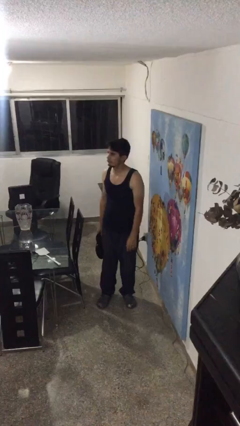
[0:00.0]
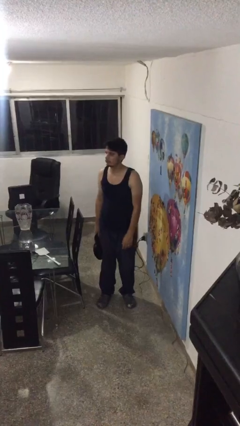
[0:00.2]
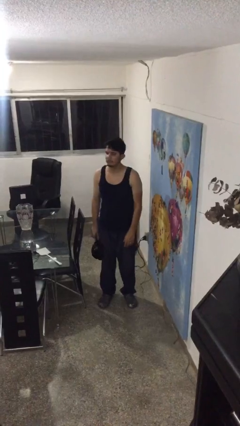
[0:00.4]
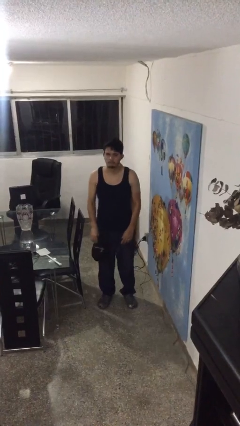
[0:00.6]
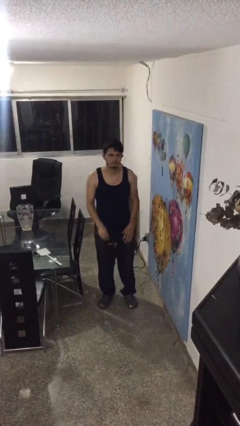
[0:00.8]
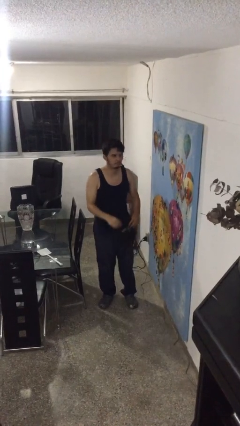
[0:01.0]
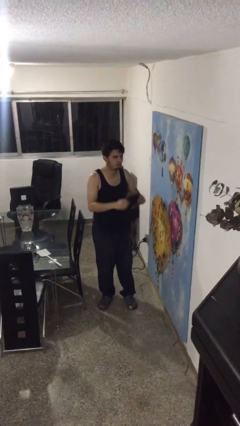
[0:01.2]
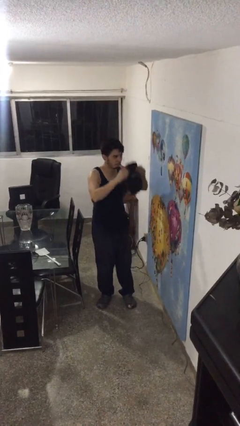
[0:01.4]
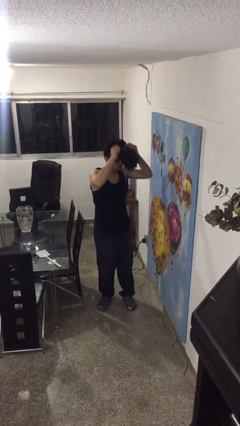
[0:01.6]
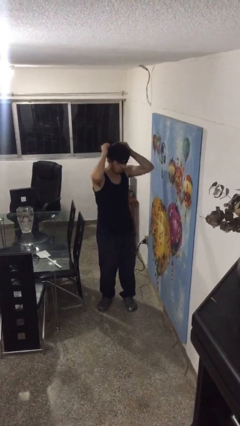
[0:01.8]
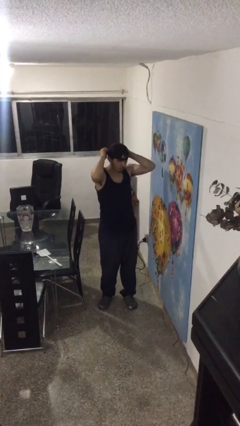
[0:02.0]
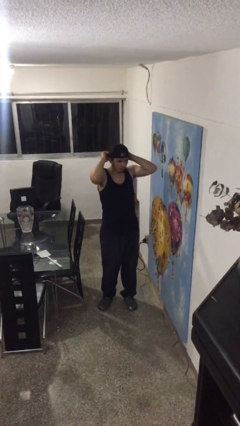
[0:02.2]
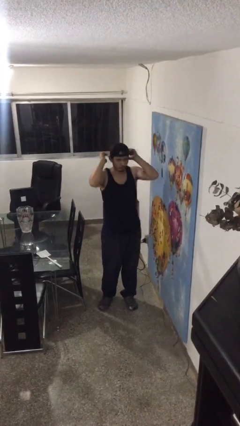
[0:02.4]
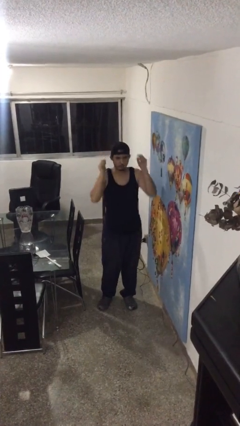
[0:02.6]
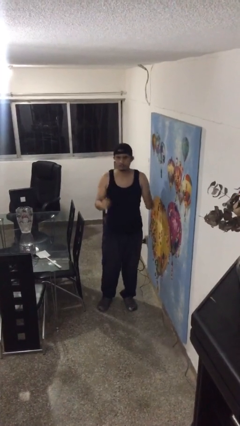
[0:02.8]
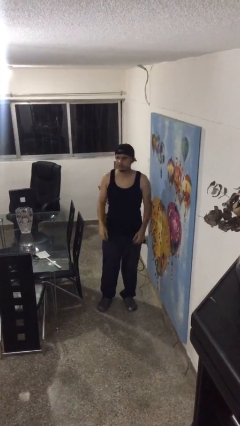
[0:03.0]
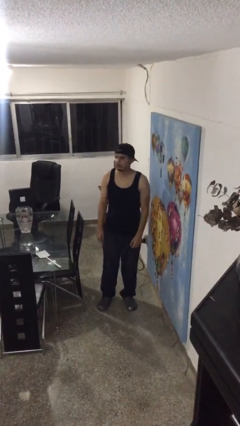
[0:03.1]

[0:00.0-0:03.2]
person puts on hat

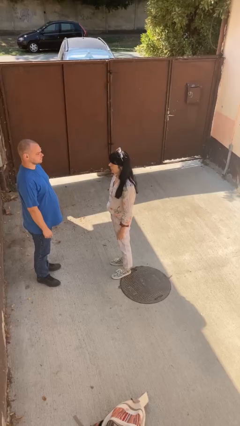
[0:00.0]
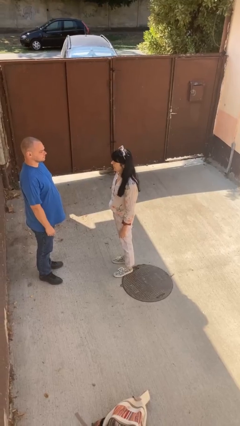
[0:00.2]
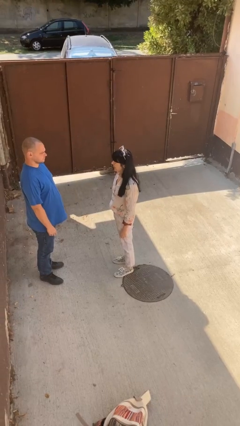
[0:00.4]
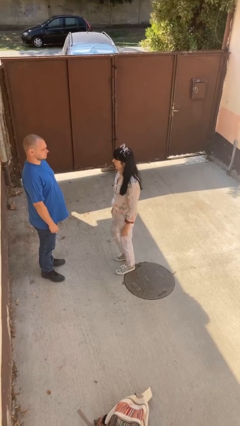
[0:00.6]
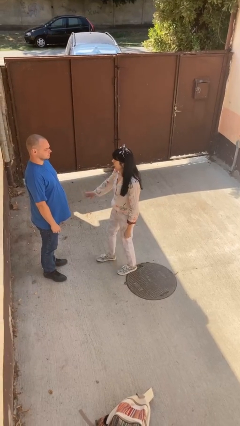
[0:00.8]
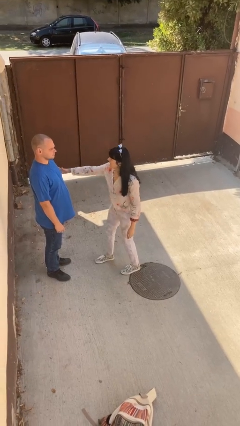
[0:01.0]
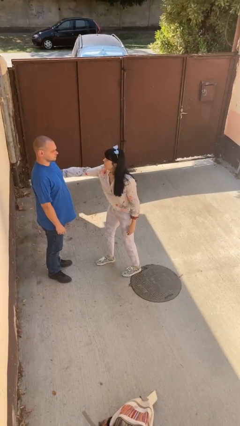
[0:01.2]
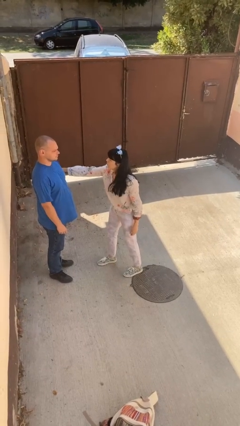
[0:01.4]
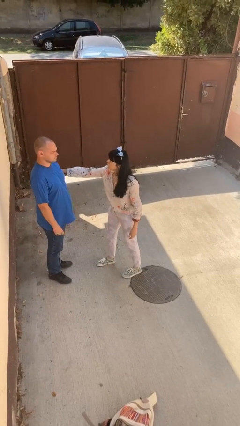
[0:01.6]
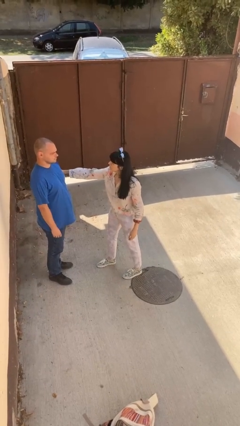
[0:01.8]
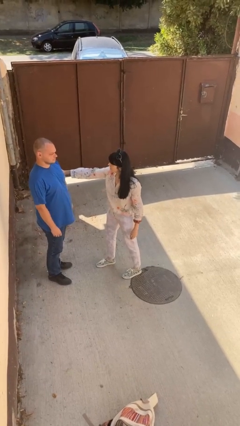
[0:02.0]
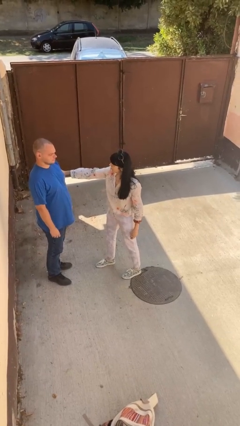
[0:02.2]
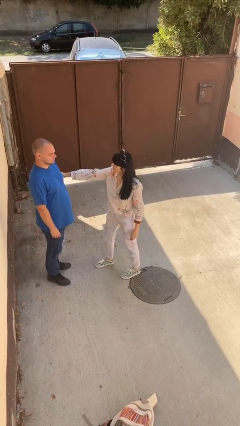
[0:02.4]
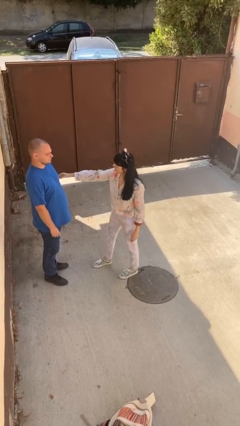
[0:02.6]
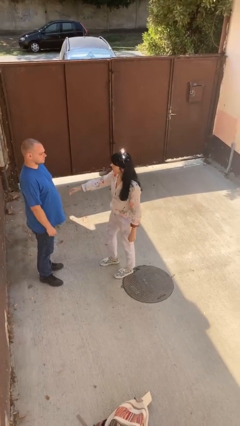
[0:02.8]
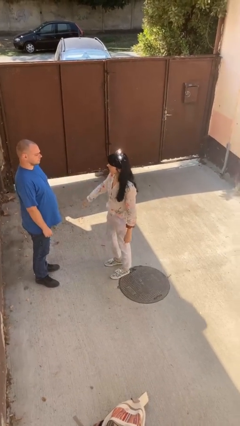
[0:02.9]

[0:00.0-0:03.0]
person grabs person by bicep

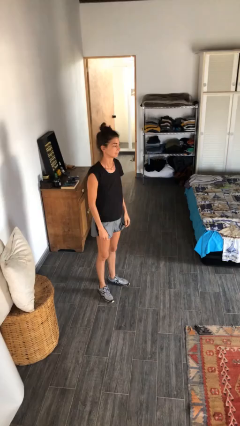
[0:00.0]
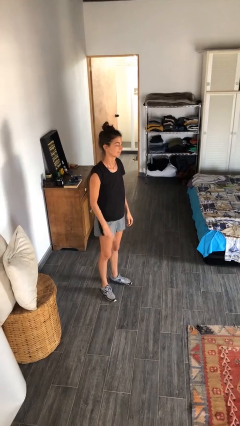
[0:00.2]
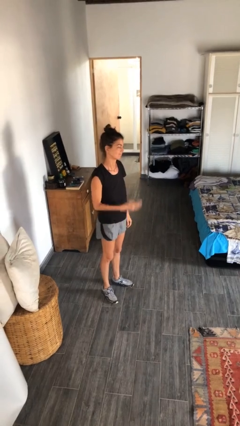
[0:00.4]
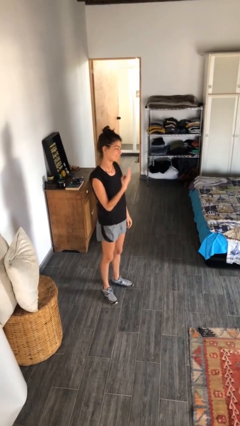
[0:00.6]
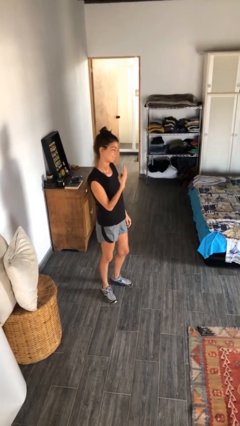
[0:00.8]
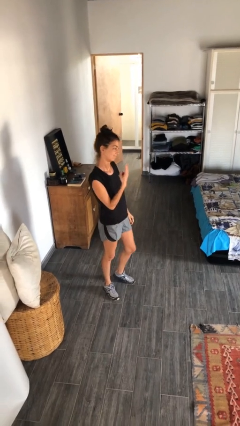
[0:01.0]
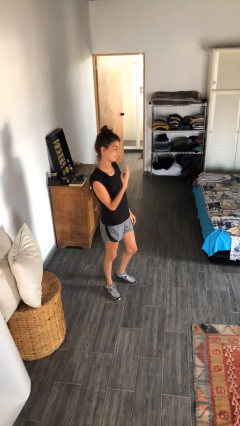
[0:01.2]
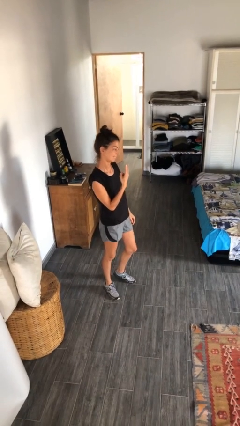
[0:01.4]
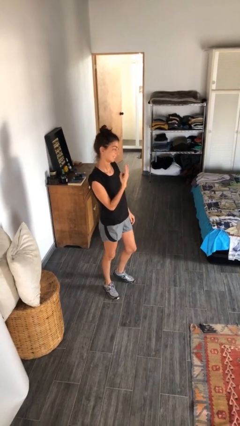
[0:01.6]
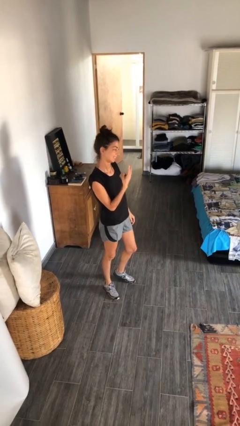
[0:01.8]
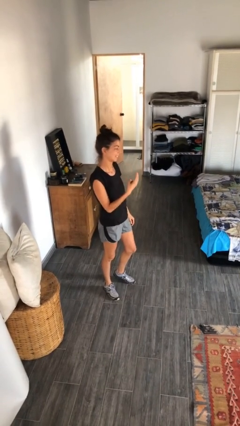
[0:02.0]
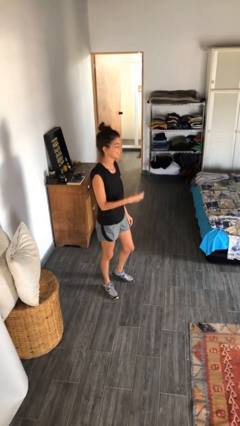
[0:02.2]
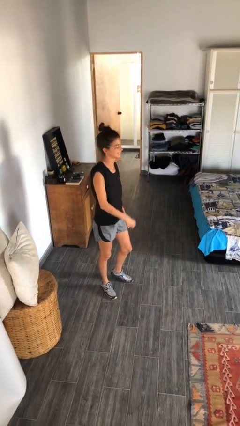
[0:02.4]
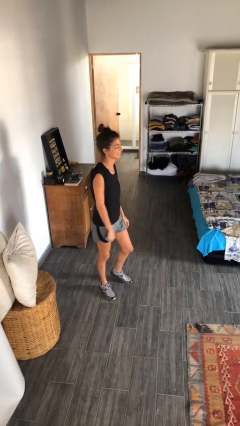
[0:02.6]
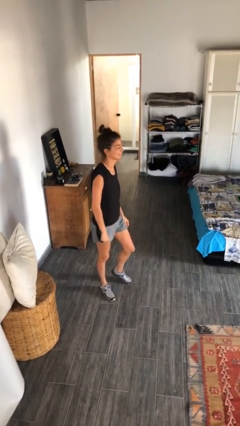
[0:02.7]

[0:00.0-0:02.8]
person gestures peace

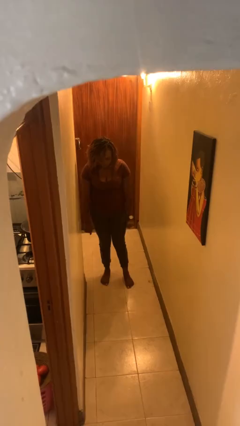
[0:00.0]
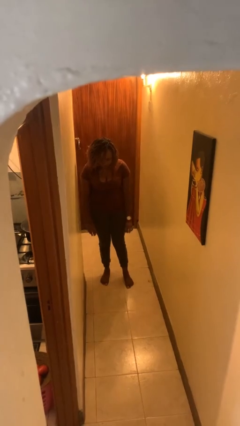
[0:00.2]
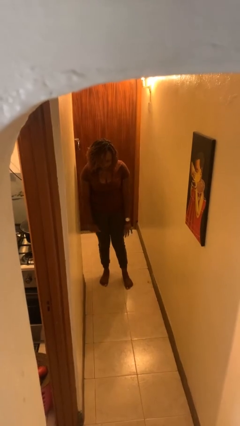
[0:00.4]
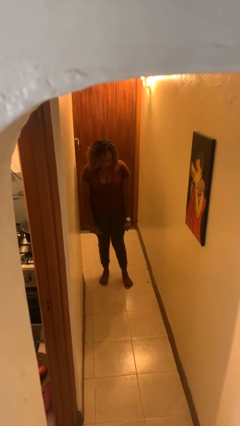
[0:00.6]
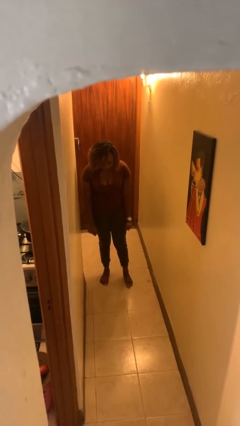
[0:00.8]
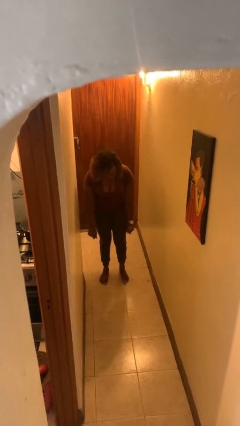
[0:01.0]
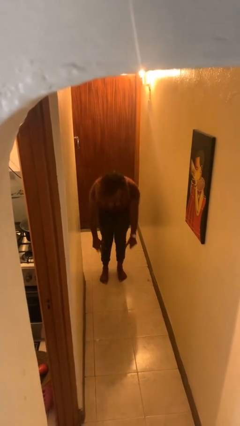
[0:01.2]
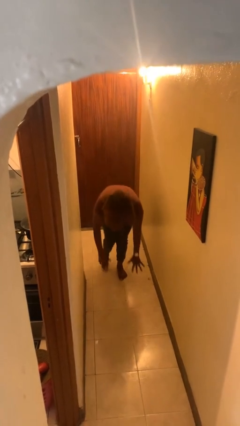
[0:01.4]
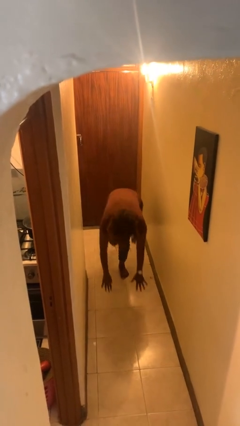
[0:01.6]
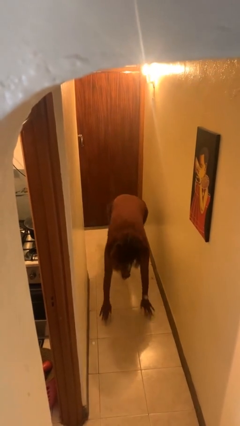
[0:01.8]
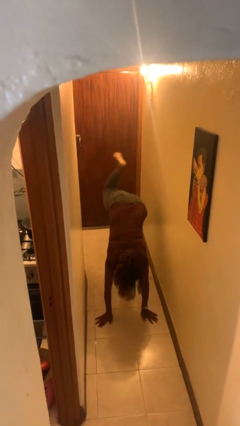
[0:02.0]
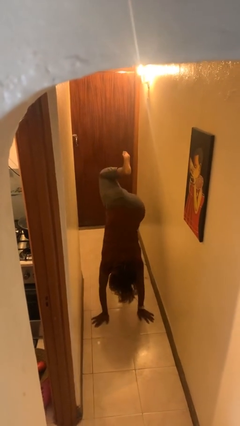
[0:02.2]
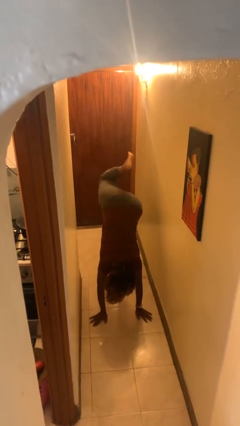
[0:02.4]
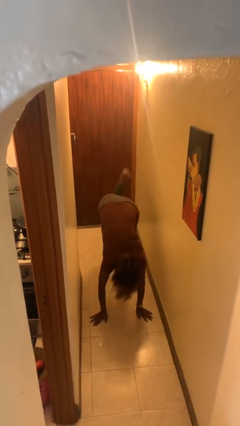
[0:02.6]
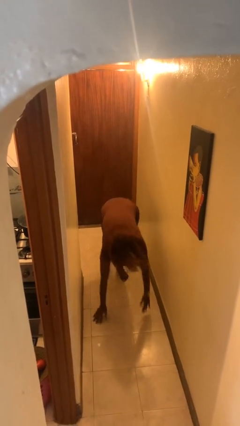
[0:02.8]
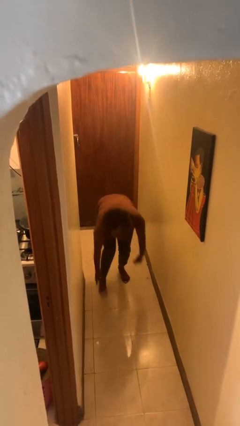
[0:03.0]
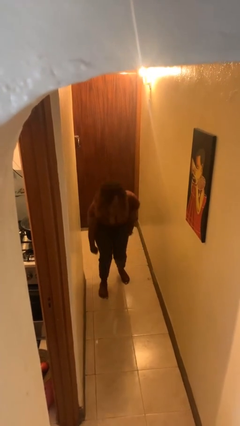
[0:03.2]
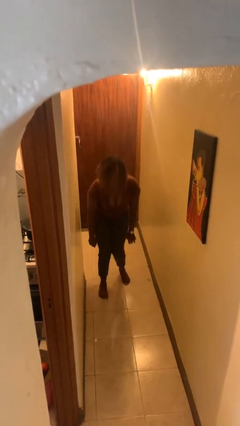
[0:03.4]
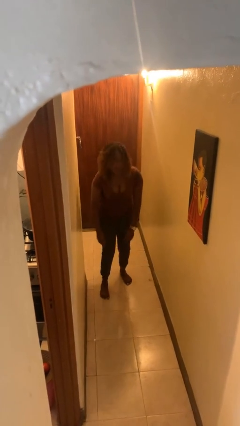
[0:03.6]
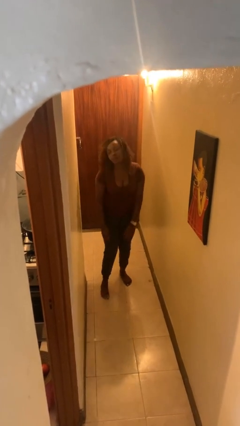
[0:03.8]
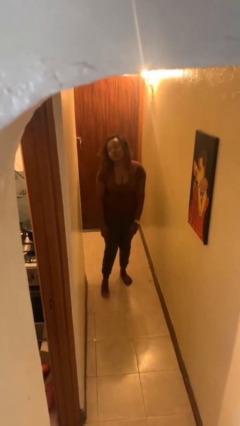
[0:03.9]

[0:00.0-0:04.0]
person handstand

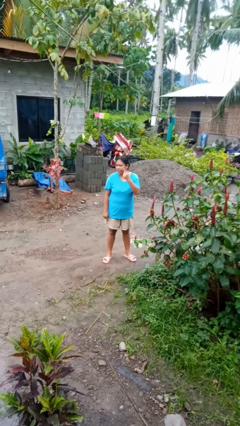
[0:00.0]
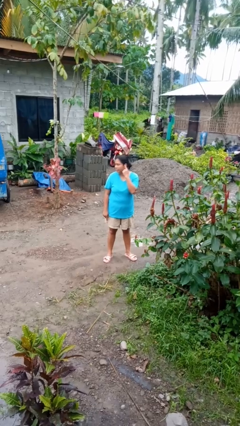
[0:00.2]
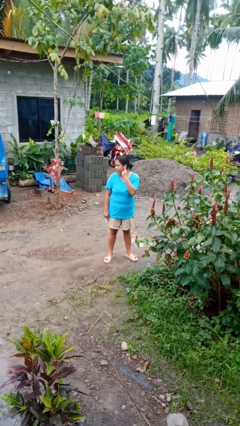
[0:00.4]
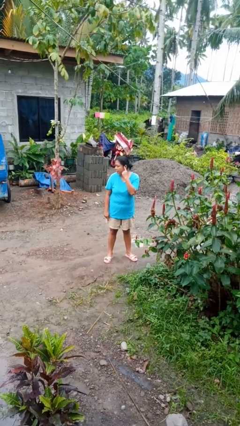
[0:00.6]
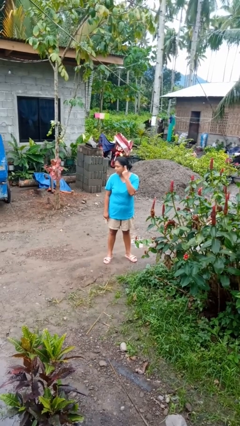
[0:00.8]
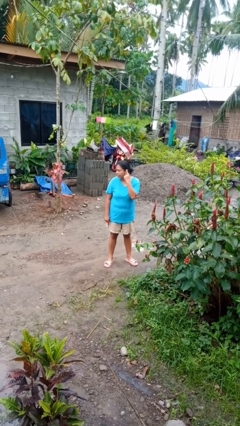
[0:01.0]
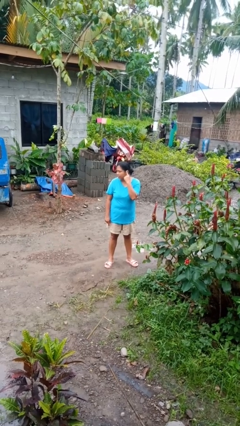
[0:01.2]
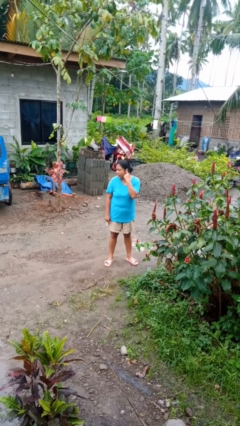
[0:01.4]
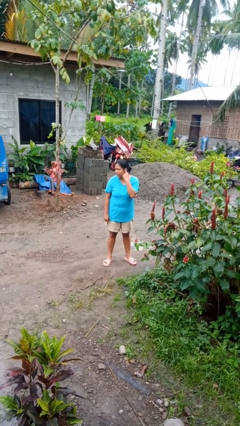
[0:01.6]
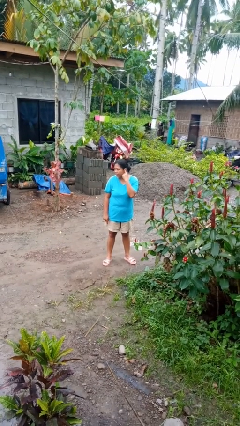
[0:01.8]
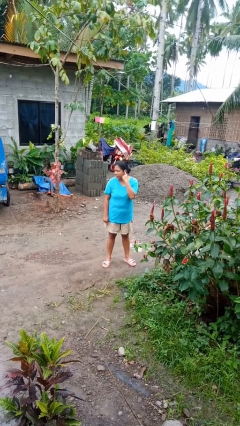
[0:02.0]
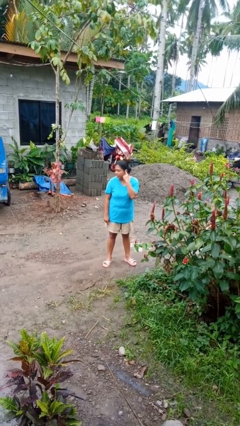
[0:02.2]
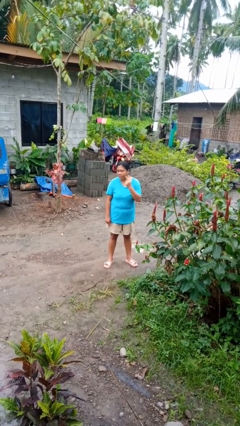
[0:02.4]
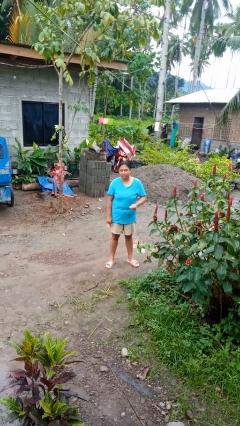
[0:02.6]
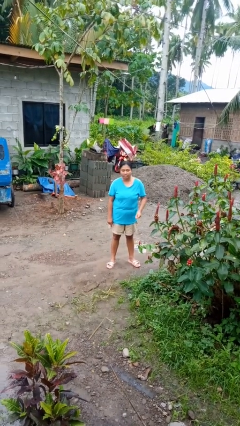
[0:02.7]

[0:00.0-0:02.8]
person gestures listen closely

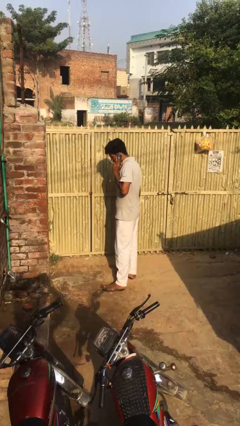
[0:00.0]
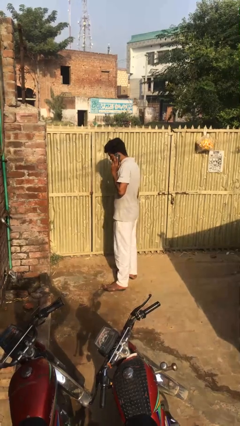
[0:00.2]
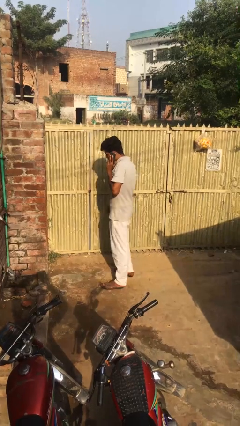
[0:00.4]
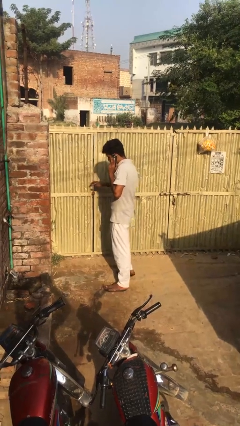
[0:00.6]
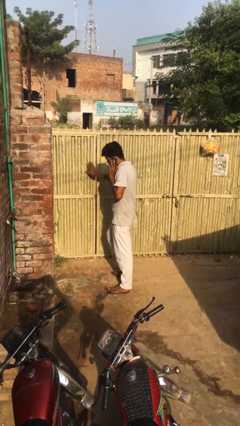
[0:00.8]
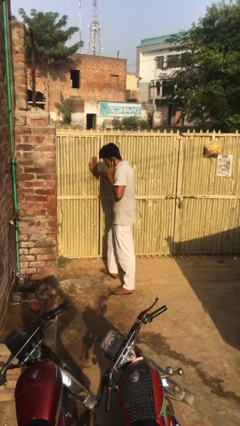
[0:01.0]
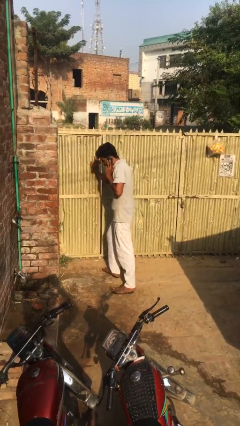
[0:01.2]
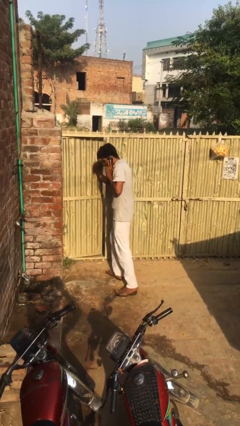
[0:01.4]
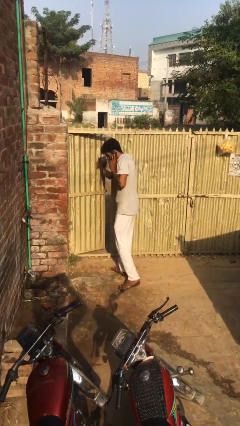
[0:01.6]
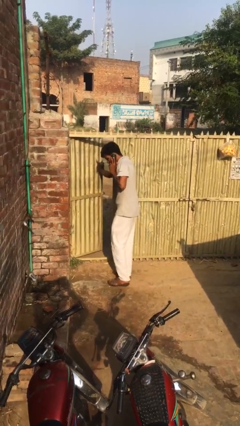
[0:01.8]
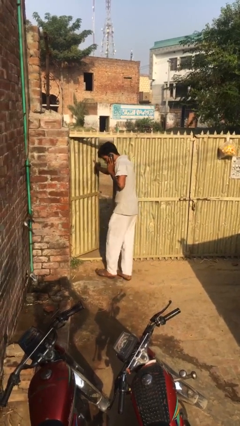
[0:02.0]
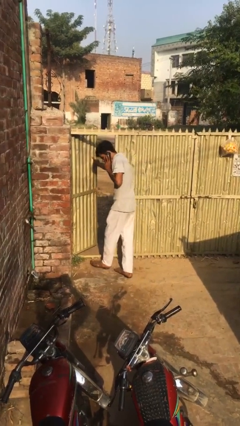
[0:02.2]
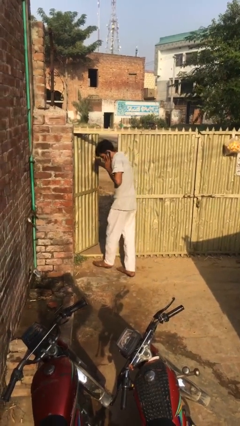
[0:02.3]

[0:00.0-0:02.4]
person opens facility door
